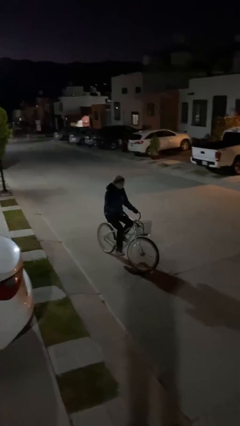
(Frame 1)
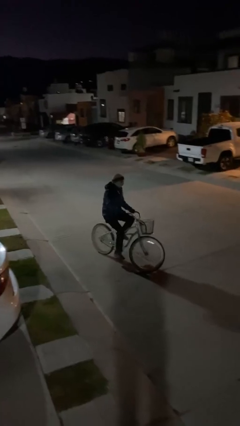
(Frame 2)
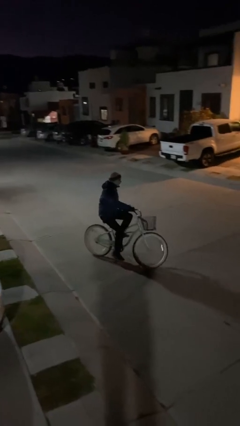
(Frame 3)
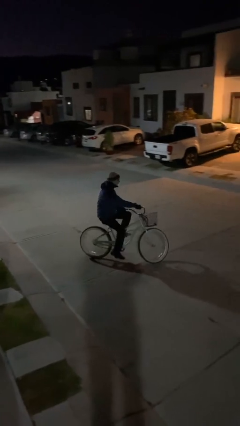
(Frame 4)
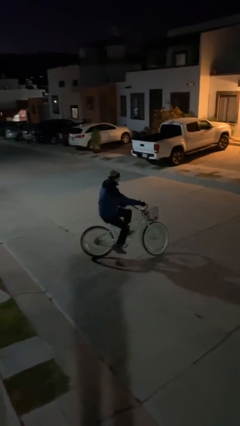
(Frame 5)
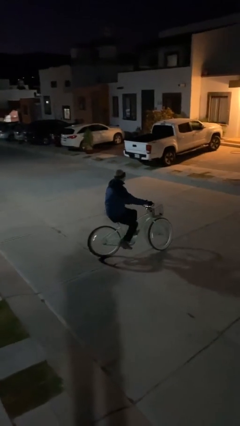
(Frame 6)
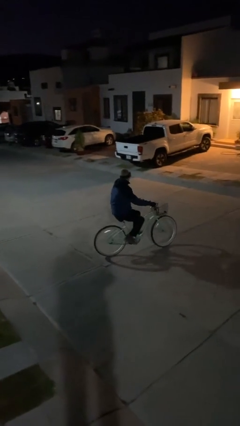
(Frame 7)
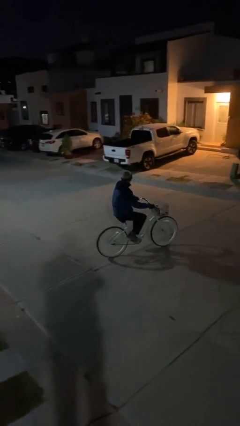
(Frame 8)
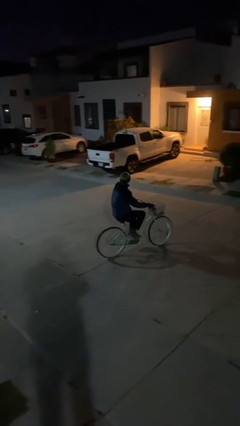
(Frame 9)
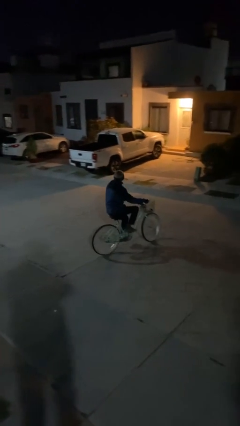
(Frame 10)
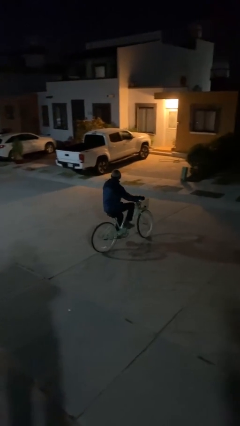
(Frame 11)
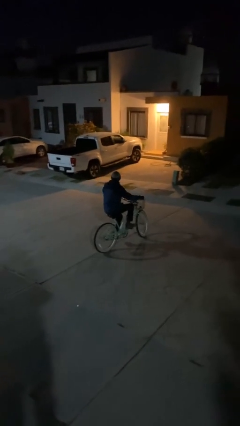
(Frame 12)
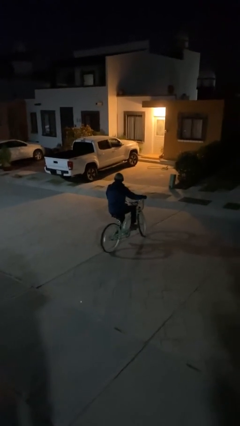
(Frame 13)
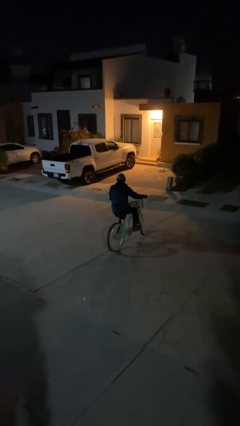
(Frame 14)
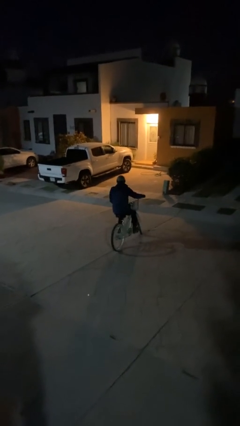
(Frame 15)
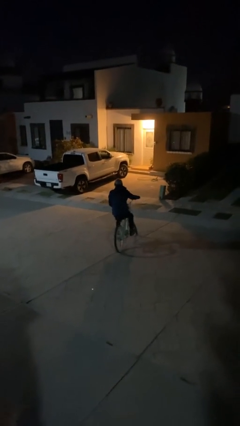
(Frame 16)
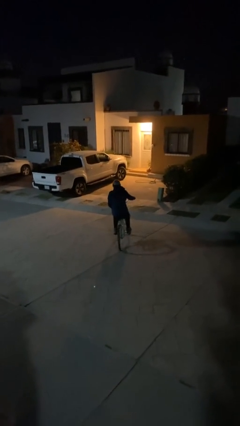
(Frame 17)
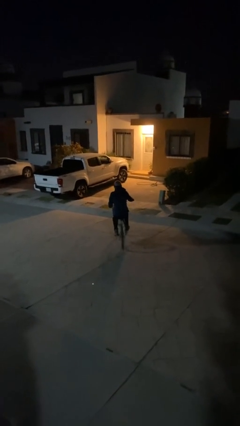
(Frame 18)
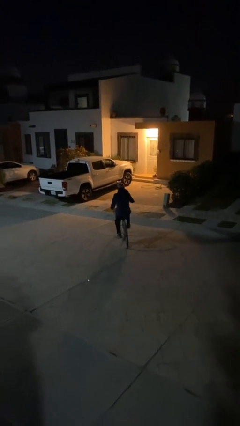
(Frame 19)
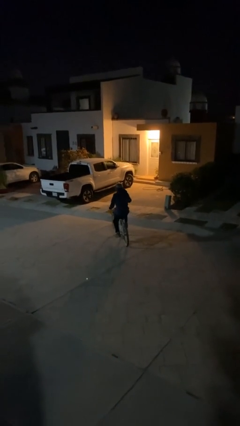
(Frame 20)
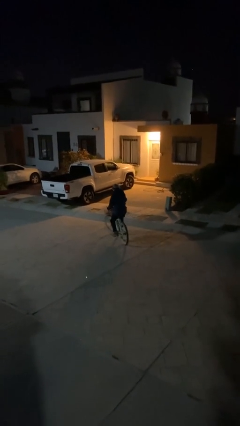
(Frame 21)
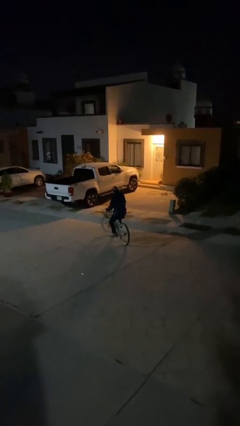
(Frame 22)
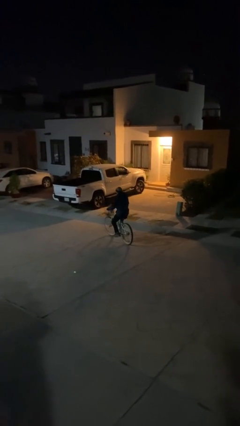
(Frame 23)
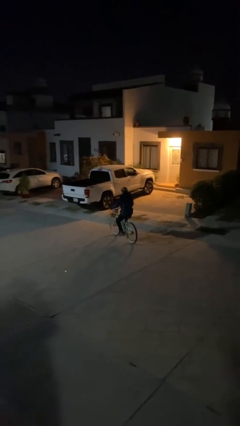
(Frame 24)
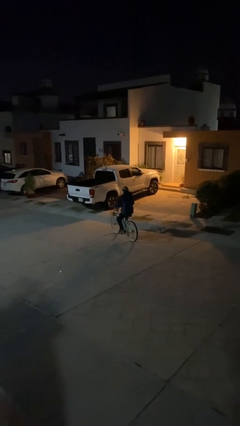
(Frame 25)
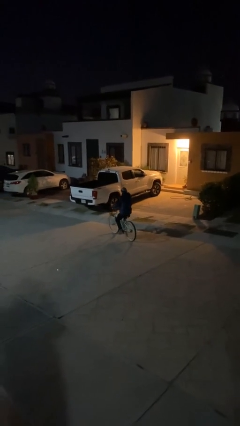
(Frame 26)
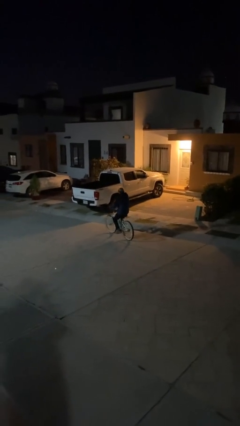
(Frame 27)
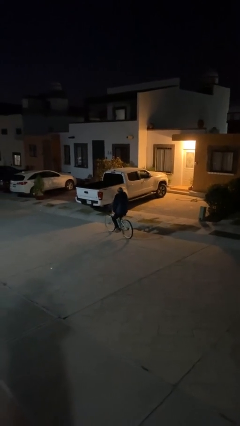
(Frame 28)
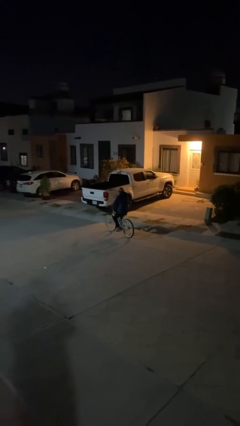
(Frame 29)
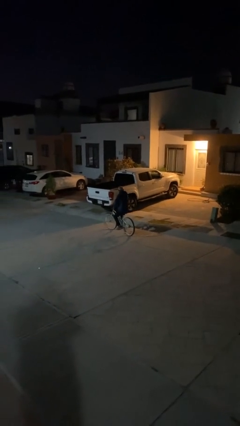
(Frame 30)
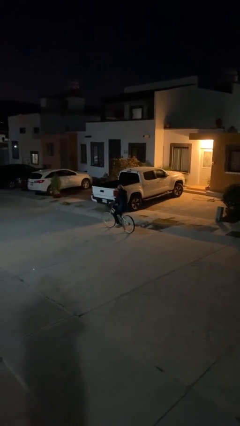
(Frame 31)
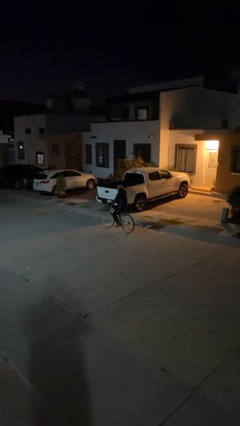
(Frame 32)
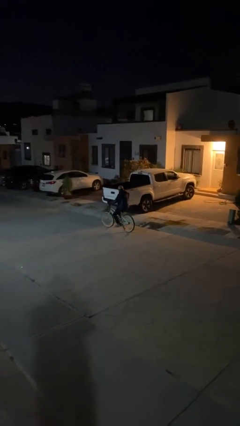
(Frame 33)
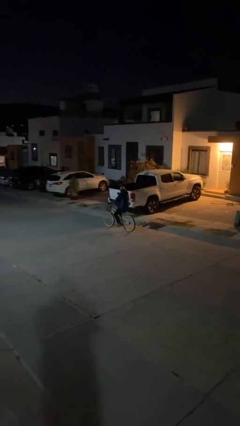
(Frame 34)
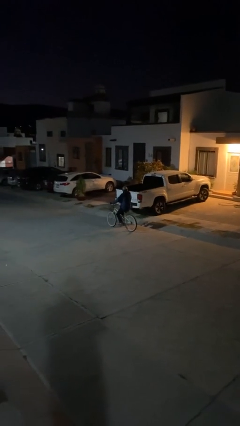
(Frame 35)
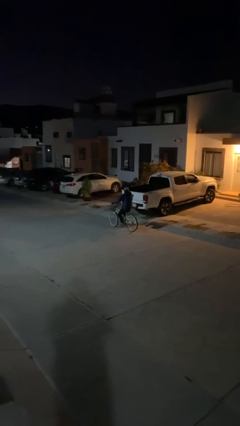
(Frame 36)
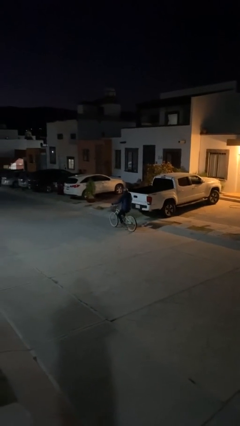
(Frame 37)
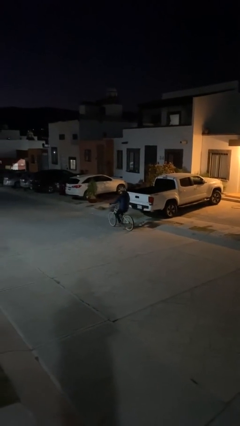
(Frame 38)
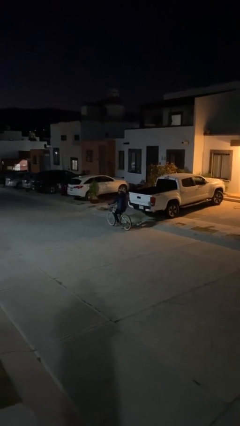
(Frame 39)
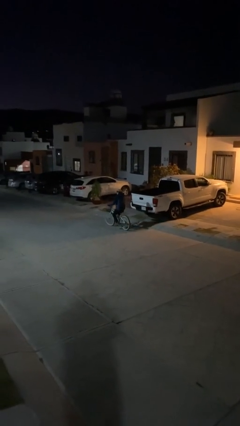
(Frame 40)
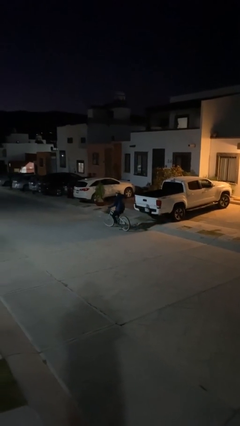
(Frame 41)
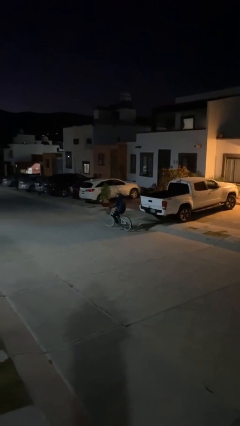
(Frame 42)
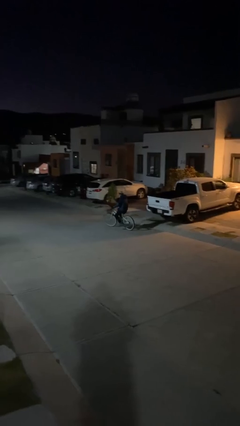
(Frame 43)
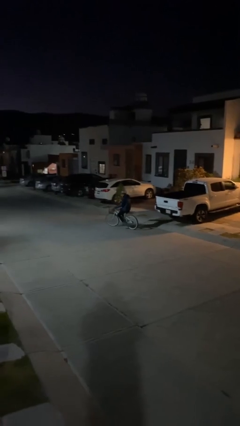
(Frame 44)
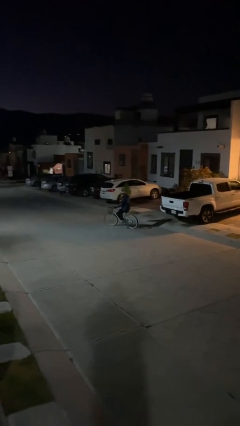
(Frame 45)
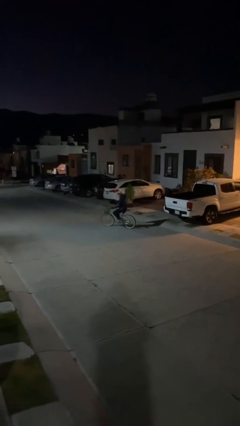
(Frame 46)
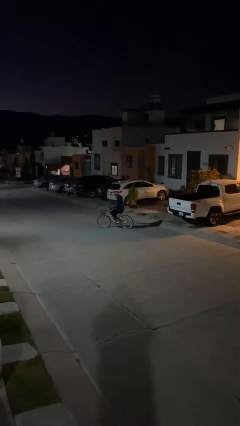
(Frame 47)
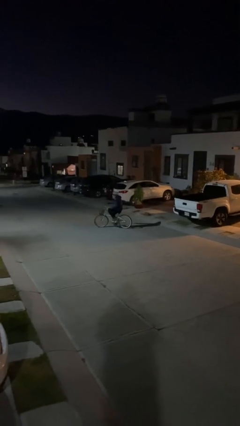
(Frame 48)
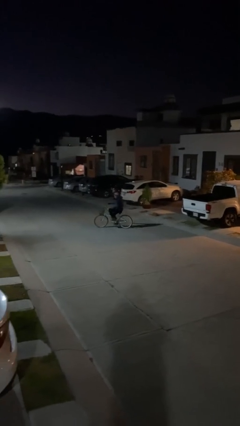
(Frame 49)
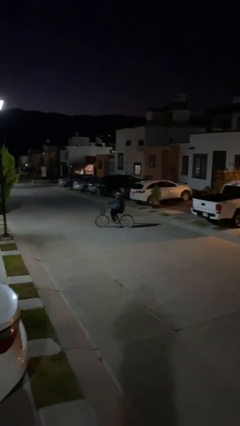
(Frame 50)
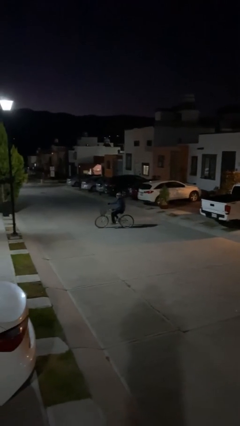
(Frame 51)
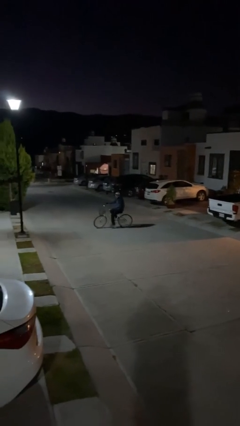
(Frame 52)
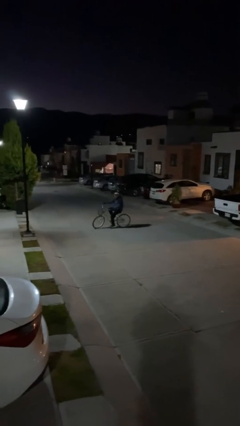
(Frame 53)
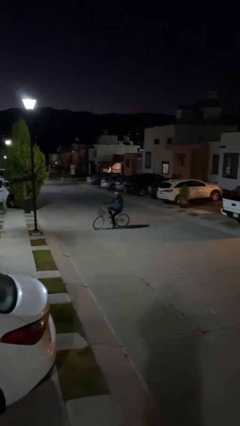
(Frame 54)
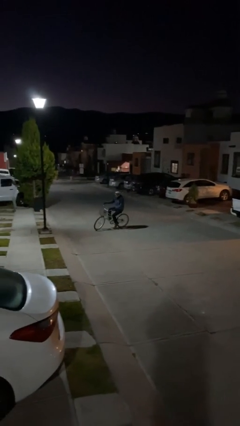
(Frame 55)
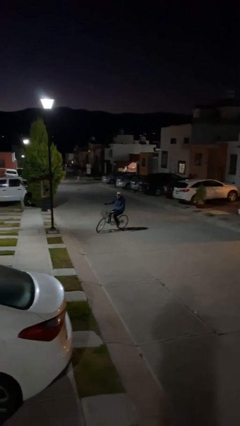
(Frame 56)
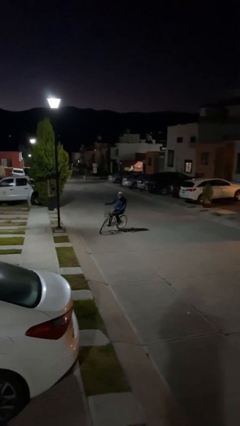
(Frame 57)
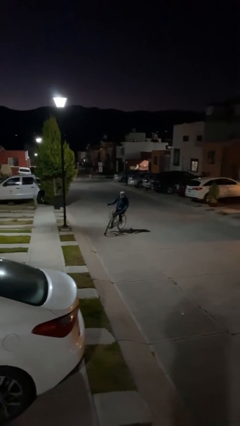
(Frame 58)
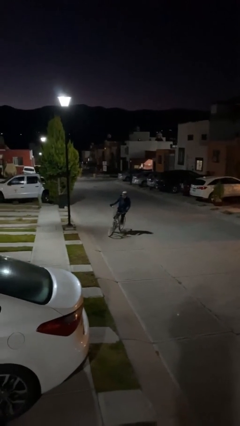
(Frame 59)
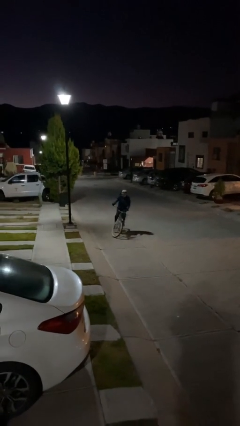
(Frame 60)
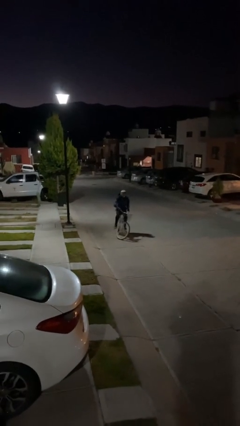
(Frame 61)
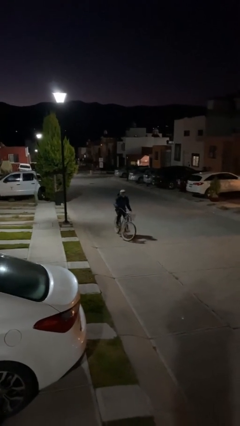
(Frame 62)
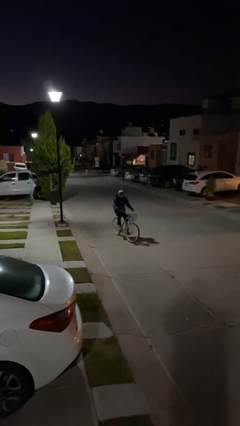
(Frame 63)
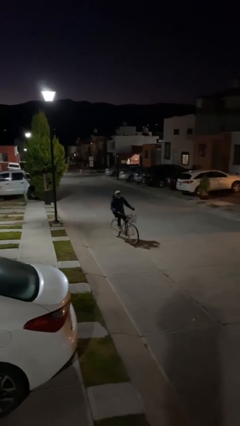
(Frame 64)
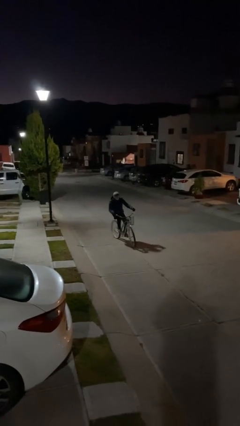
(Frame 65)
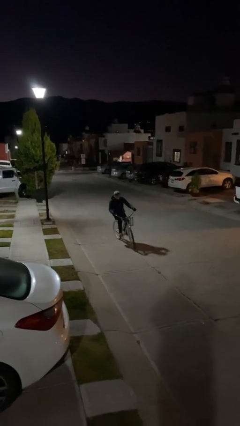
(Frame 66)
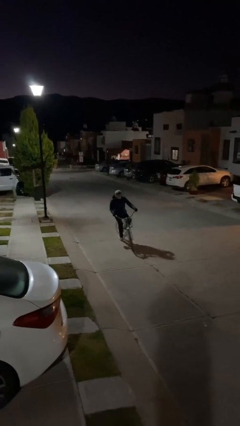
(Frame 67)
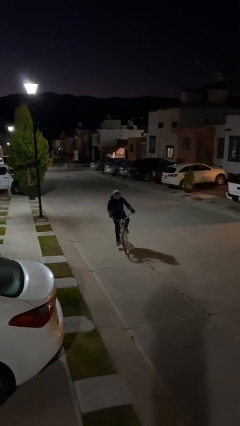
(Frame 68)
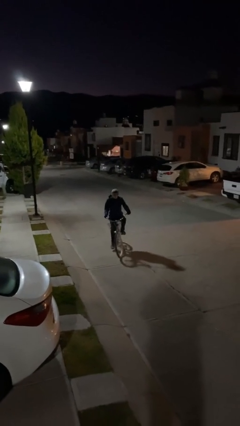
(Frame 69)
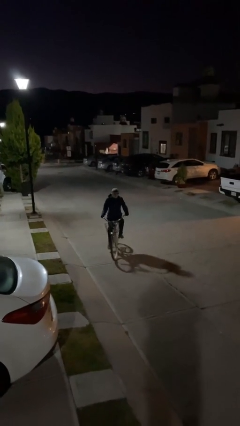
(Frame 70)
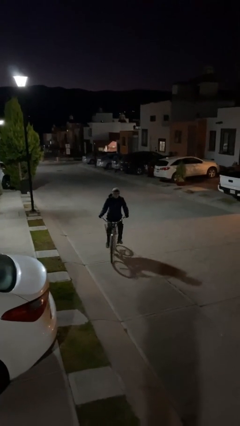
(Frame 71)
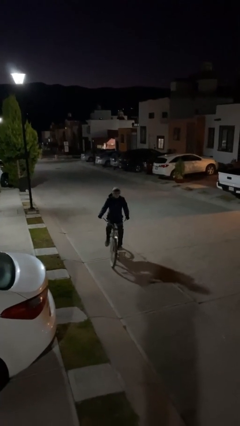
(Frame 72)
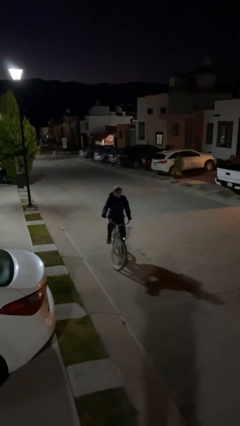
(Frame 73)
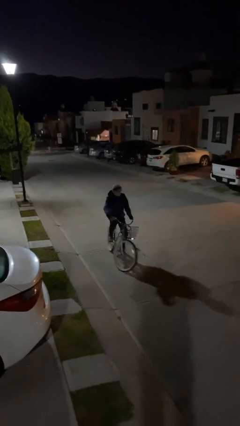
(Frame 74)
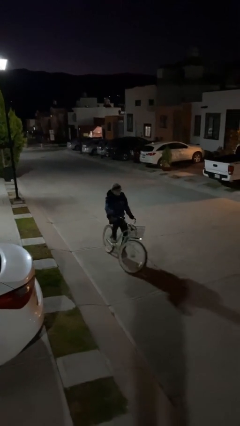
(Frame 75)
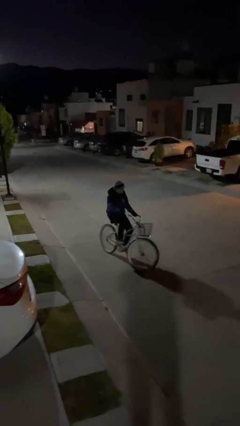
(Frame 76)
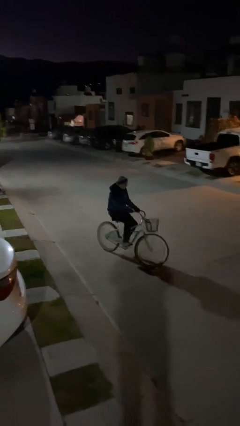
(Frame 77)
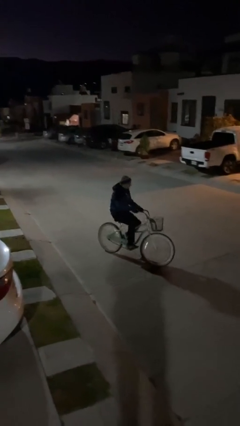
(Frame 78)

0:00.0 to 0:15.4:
person rides bicycle

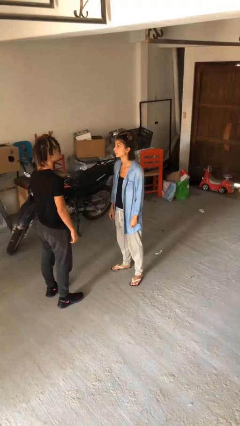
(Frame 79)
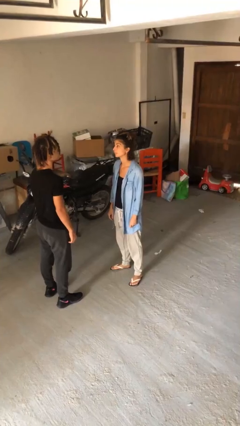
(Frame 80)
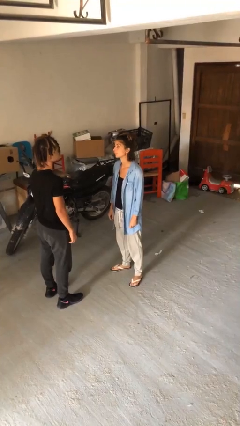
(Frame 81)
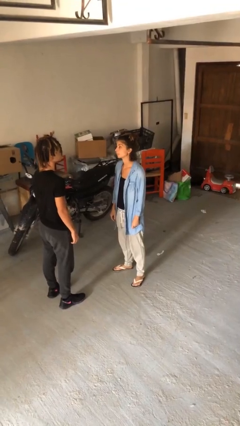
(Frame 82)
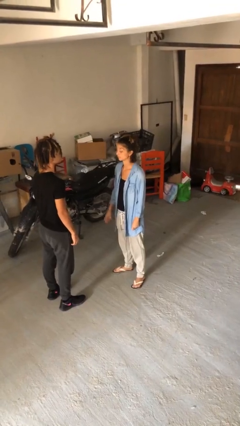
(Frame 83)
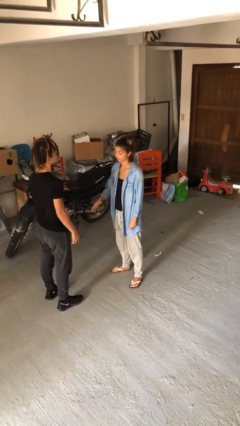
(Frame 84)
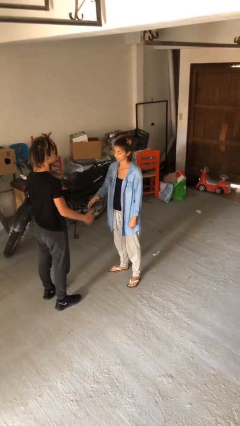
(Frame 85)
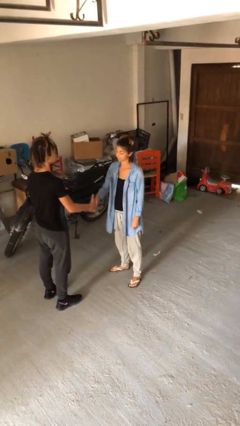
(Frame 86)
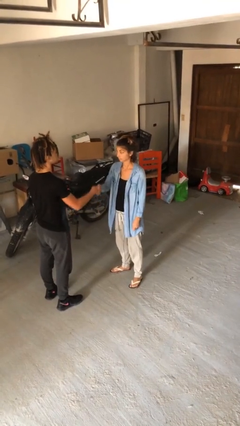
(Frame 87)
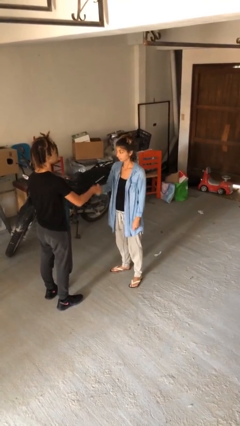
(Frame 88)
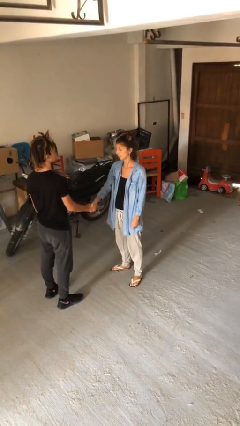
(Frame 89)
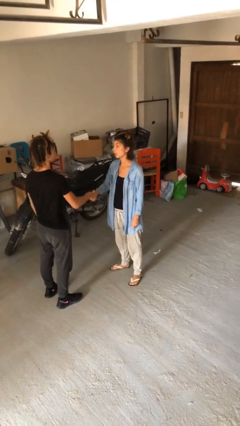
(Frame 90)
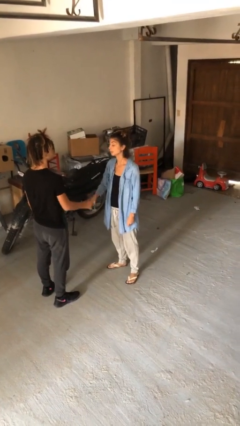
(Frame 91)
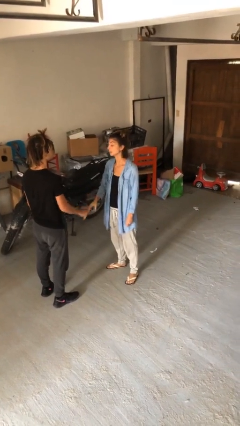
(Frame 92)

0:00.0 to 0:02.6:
person shakes hand

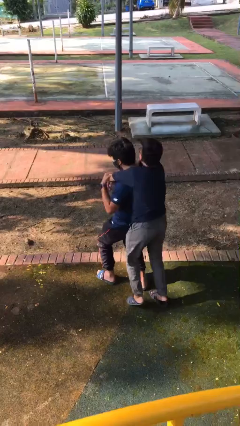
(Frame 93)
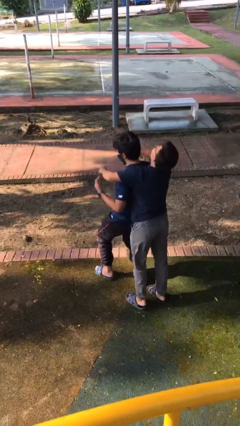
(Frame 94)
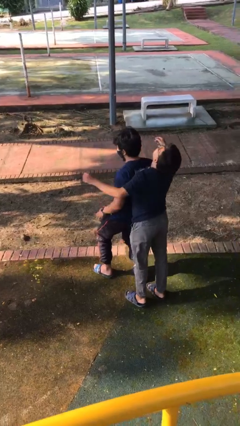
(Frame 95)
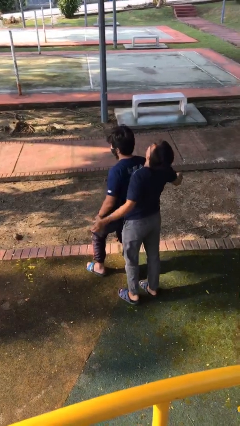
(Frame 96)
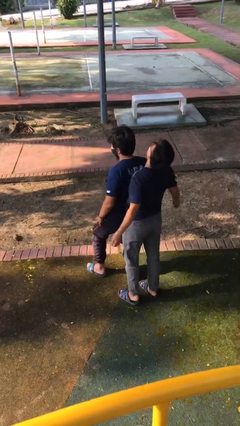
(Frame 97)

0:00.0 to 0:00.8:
person puts down person
